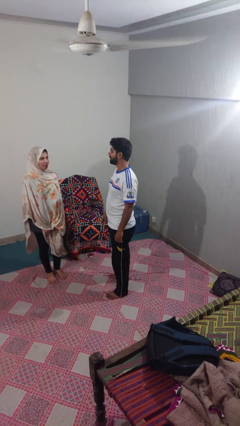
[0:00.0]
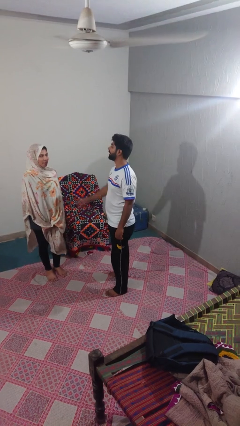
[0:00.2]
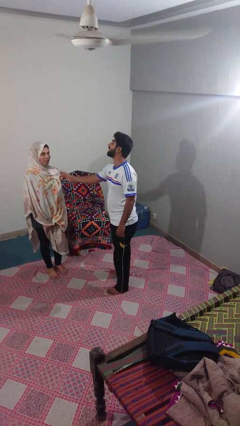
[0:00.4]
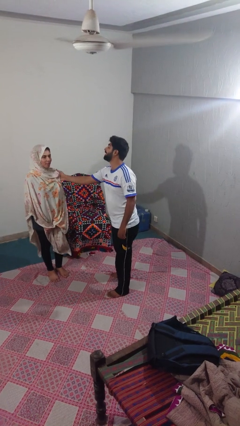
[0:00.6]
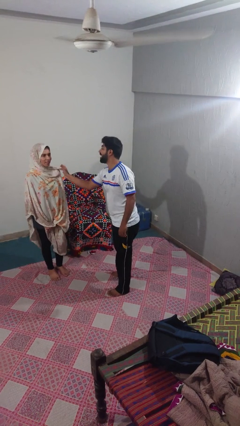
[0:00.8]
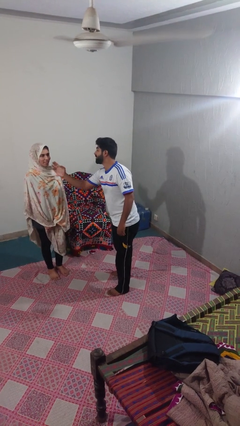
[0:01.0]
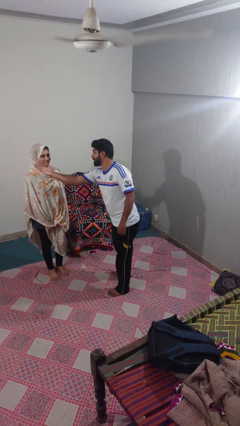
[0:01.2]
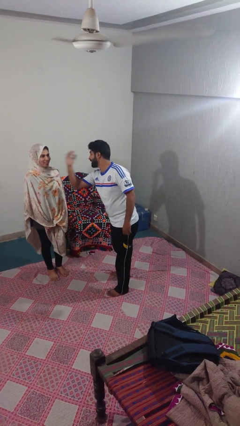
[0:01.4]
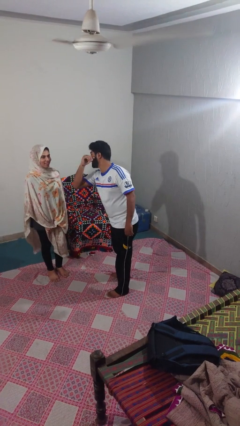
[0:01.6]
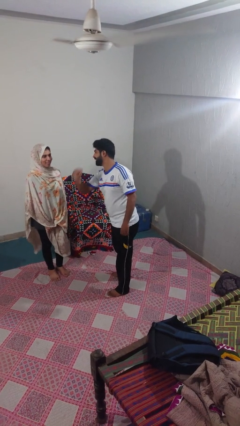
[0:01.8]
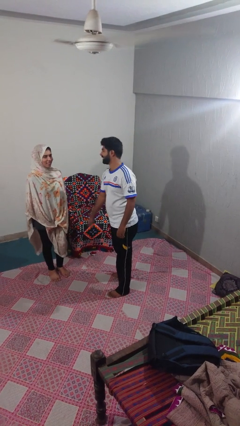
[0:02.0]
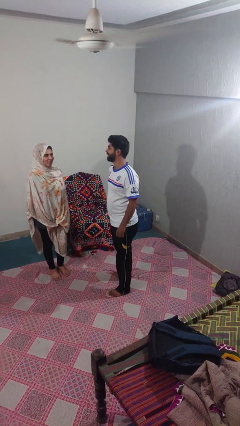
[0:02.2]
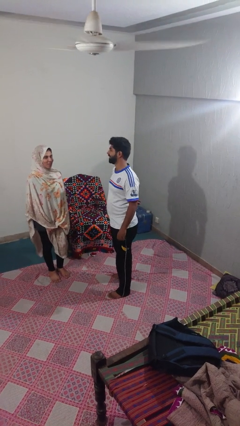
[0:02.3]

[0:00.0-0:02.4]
person shoves person

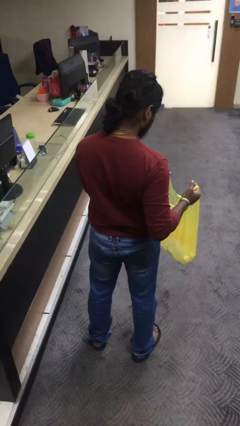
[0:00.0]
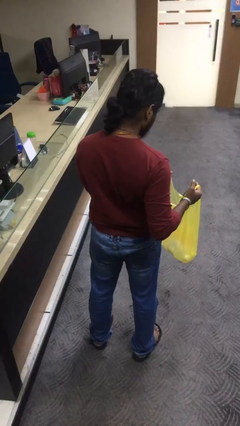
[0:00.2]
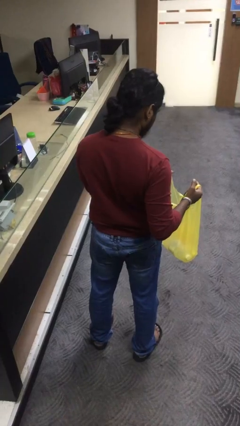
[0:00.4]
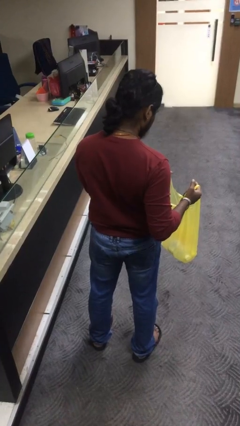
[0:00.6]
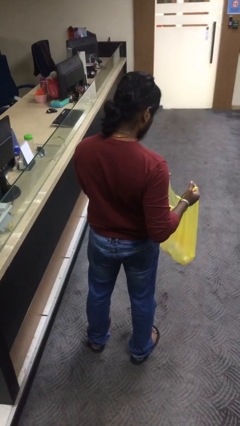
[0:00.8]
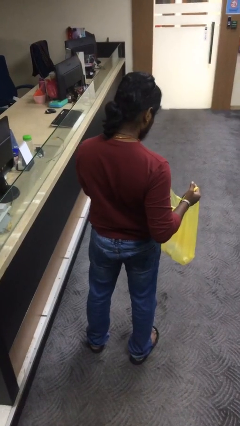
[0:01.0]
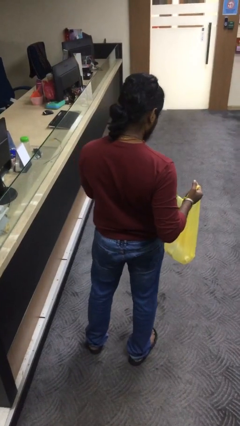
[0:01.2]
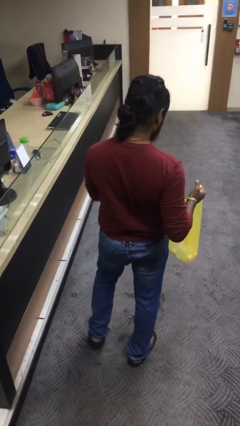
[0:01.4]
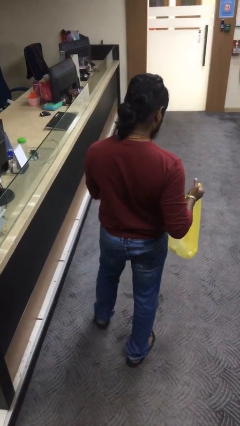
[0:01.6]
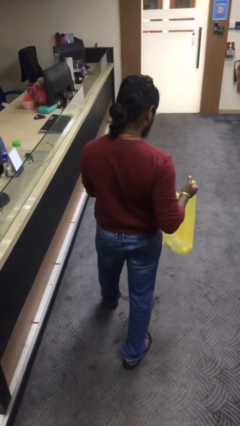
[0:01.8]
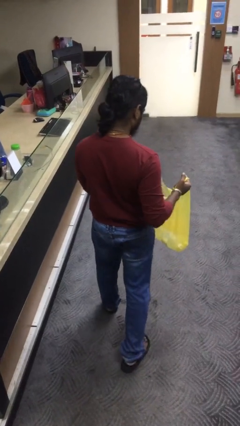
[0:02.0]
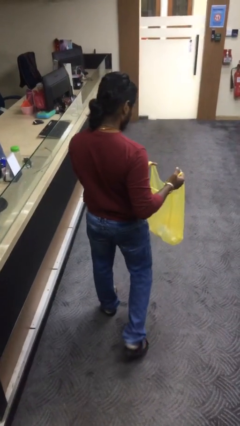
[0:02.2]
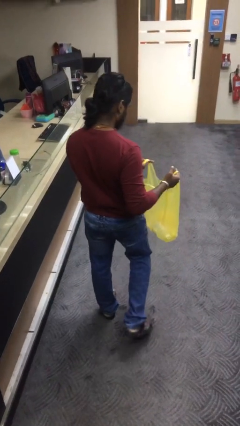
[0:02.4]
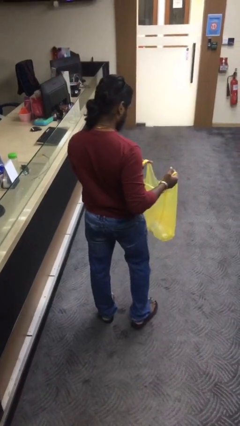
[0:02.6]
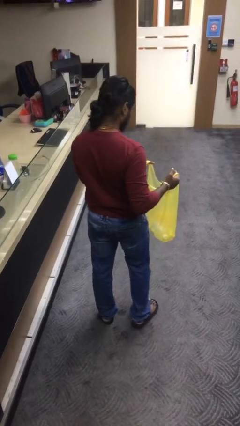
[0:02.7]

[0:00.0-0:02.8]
person carries groceries

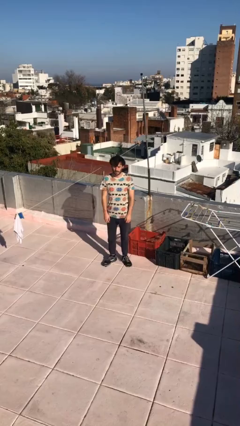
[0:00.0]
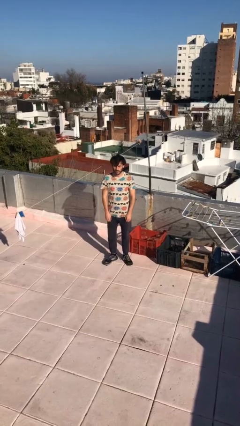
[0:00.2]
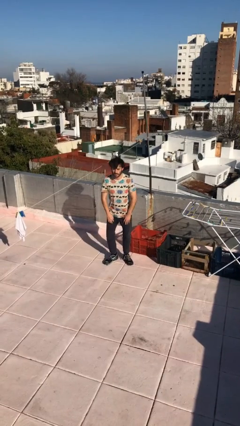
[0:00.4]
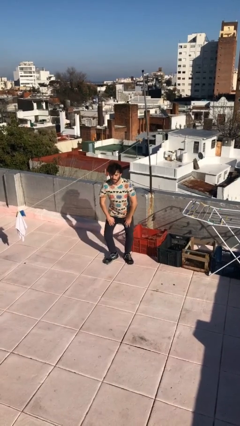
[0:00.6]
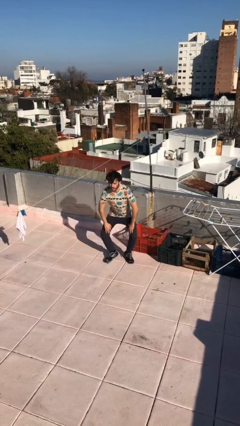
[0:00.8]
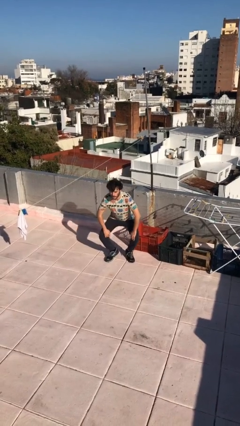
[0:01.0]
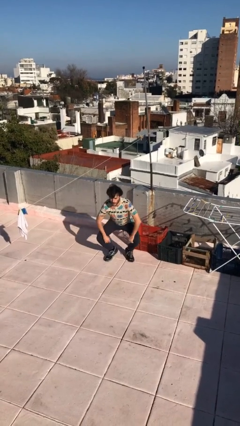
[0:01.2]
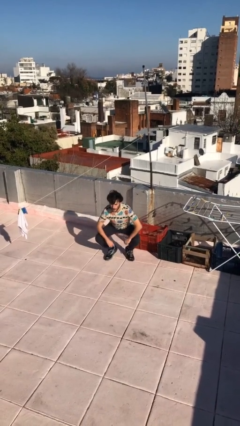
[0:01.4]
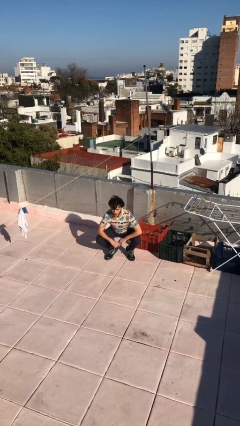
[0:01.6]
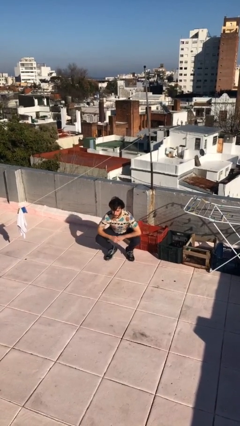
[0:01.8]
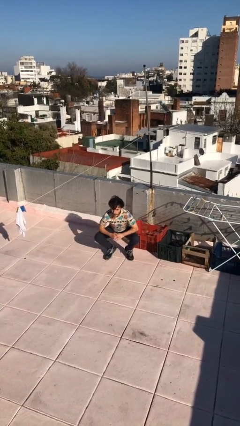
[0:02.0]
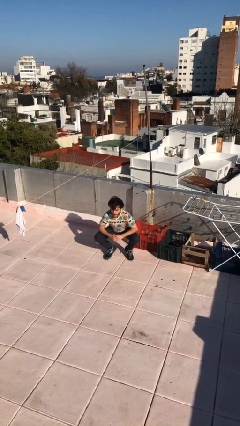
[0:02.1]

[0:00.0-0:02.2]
person squats

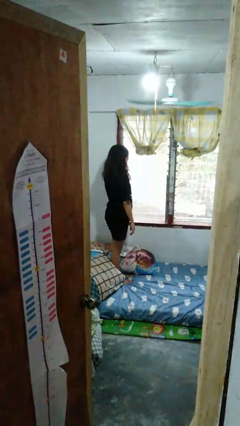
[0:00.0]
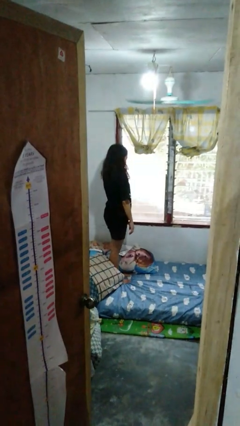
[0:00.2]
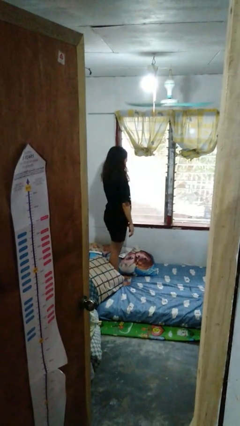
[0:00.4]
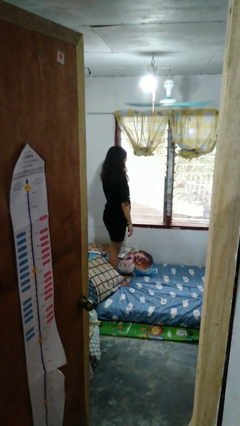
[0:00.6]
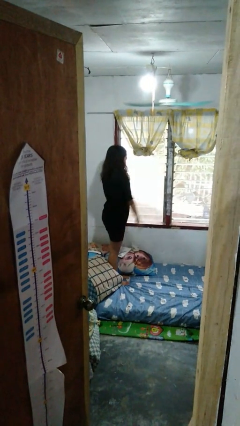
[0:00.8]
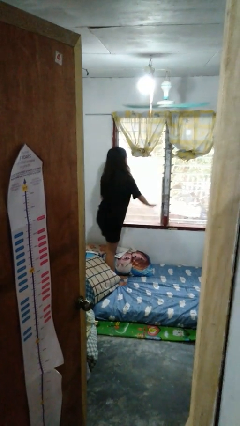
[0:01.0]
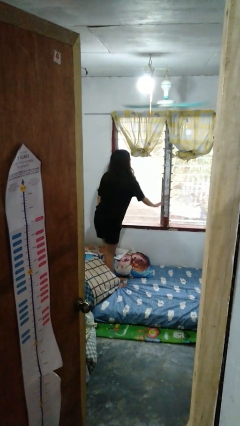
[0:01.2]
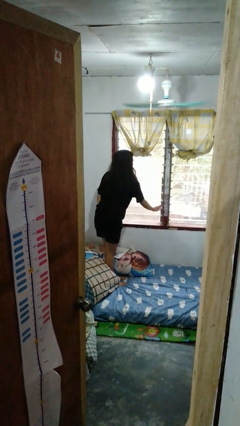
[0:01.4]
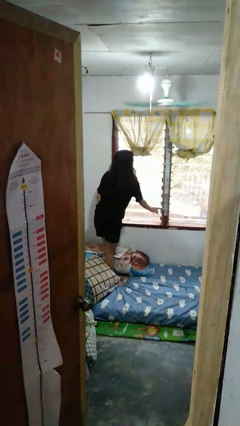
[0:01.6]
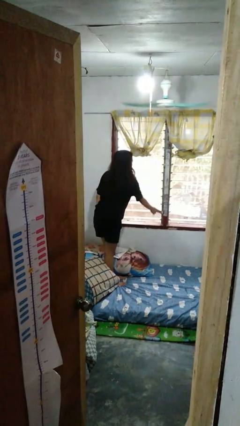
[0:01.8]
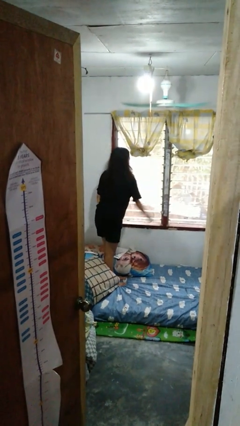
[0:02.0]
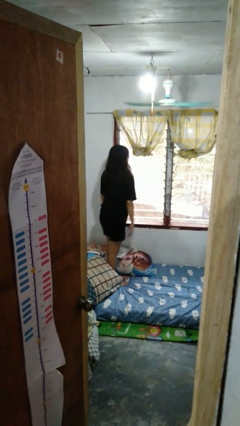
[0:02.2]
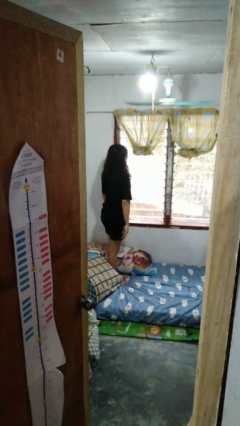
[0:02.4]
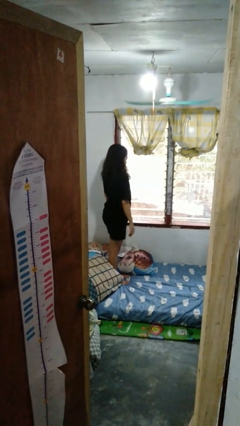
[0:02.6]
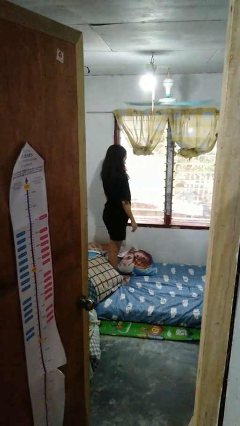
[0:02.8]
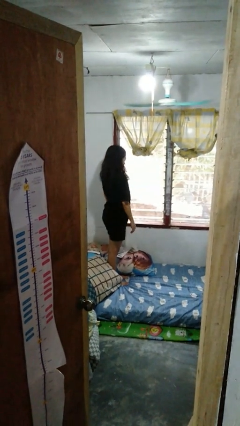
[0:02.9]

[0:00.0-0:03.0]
person opens home window

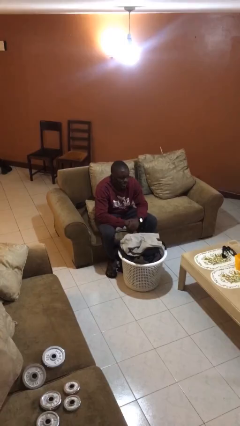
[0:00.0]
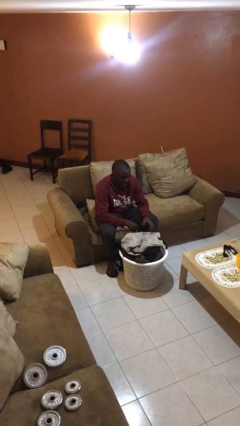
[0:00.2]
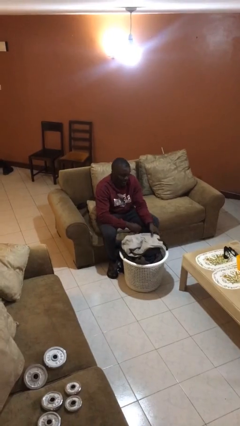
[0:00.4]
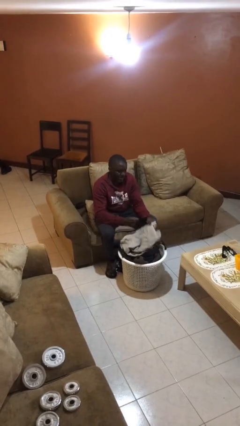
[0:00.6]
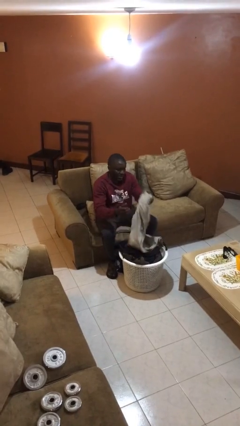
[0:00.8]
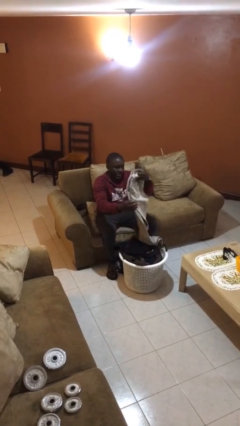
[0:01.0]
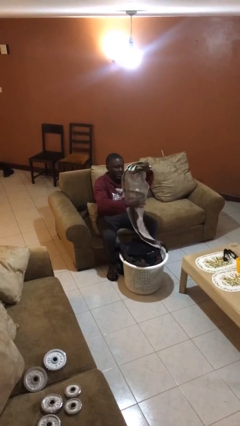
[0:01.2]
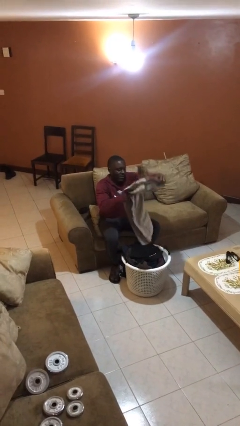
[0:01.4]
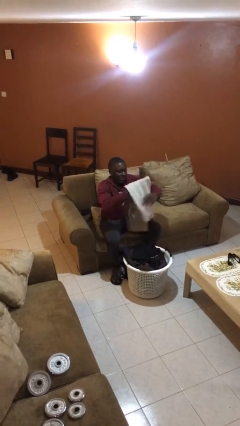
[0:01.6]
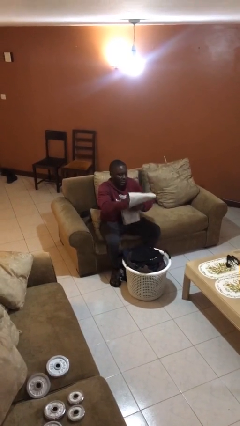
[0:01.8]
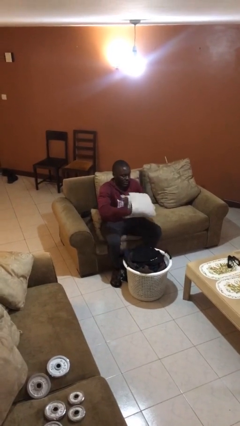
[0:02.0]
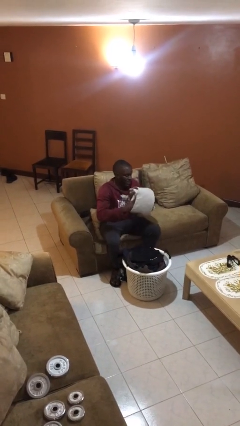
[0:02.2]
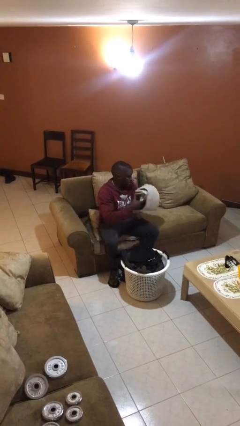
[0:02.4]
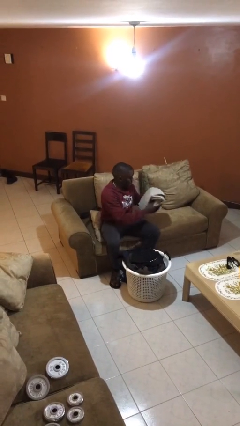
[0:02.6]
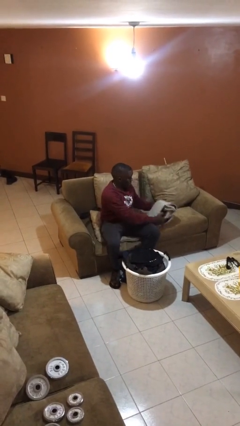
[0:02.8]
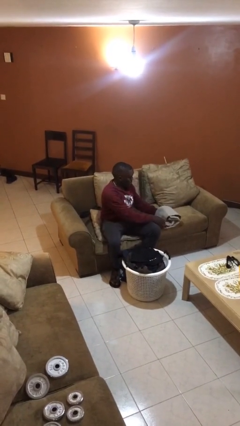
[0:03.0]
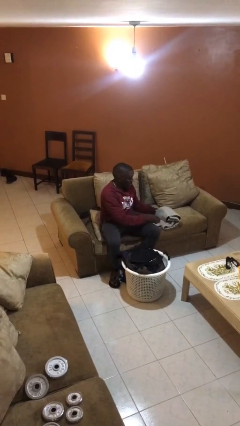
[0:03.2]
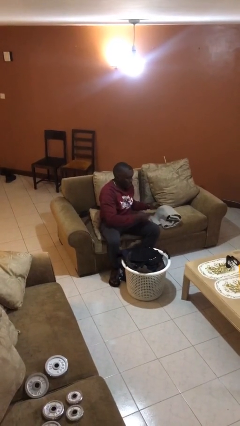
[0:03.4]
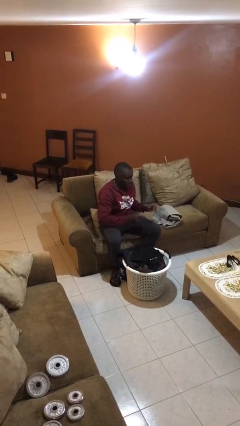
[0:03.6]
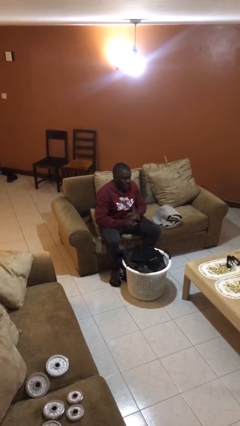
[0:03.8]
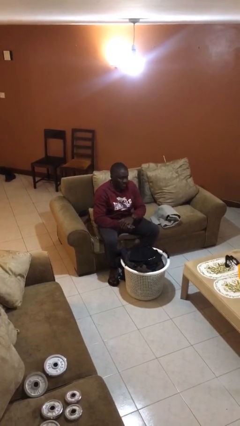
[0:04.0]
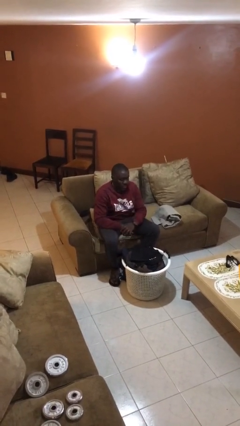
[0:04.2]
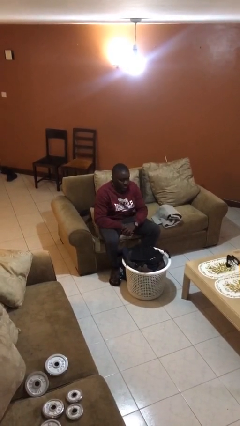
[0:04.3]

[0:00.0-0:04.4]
person folds pants

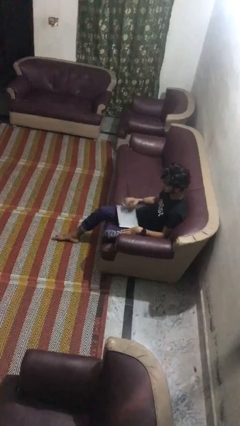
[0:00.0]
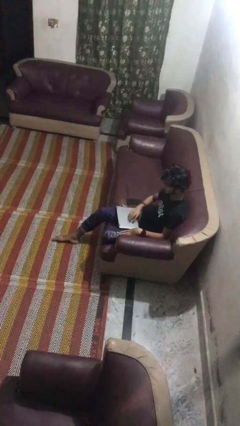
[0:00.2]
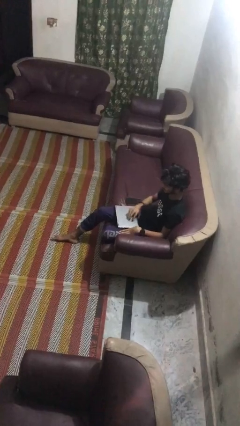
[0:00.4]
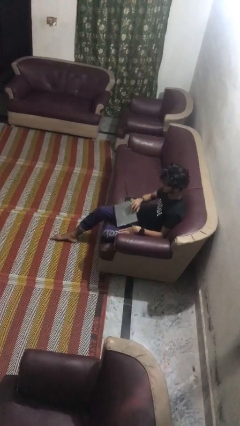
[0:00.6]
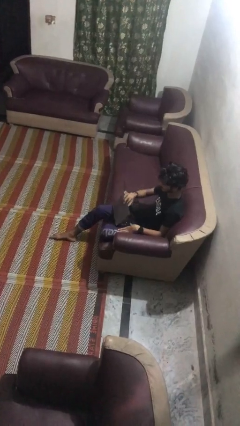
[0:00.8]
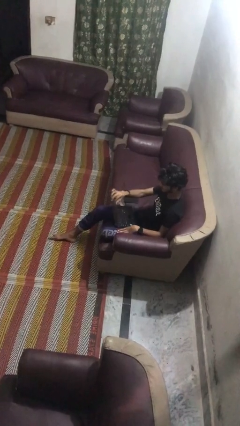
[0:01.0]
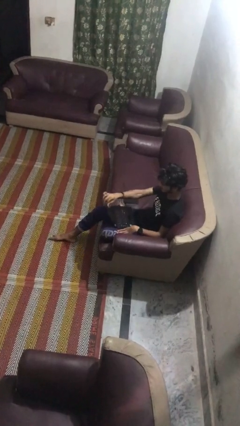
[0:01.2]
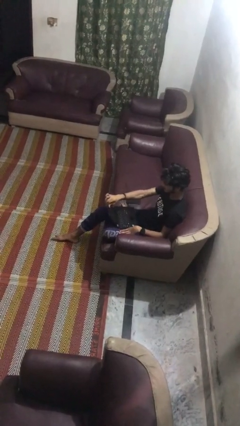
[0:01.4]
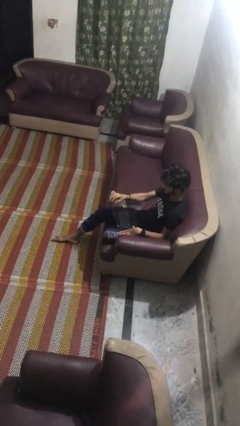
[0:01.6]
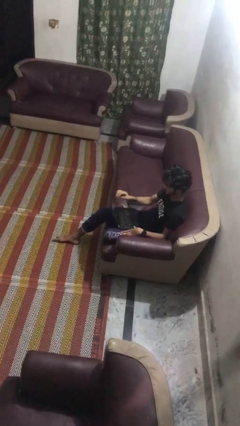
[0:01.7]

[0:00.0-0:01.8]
person opens laptop

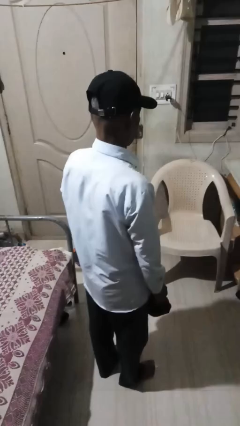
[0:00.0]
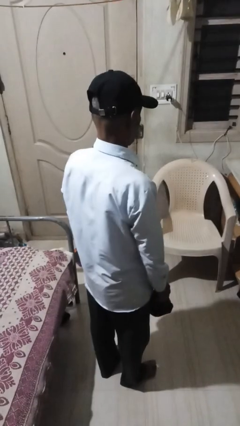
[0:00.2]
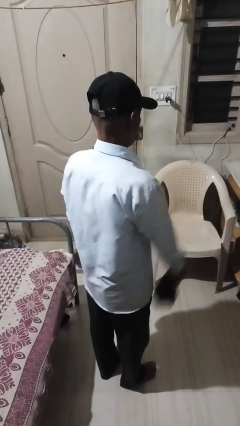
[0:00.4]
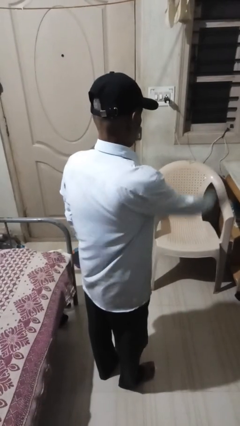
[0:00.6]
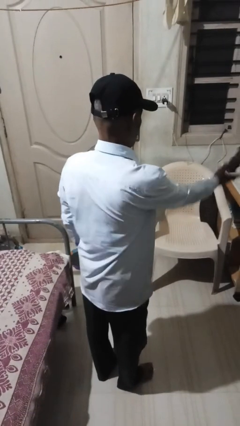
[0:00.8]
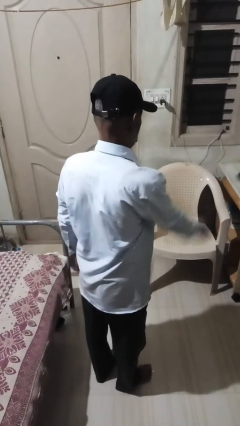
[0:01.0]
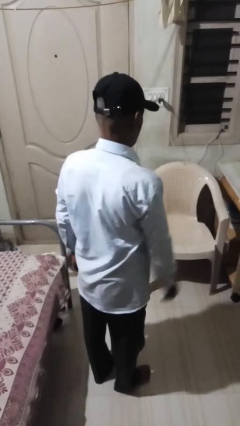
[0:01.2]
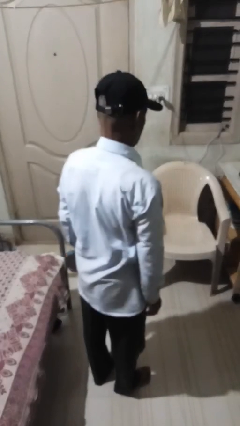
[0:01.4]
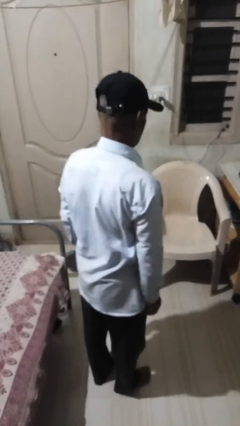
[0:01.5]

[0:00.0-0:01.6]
person throws object on table
